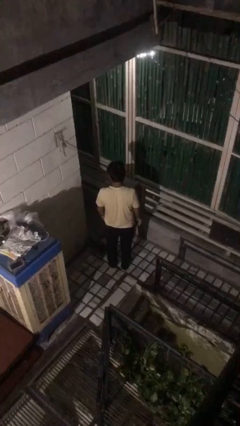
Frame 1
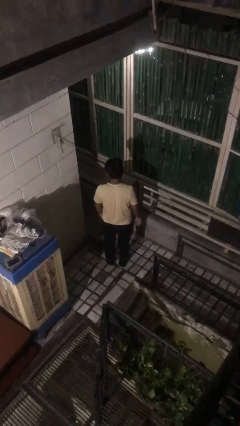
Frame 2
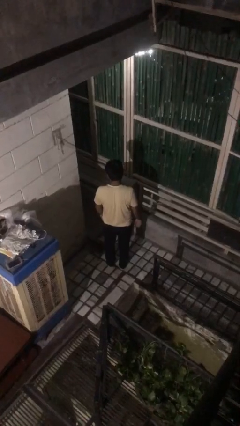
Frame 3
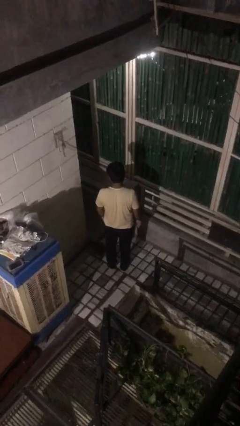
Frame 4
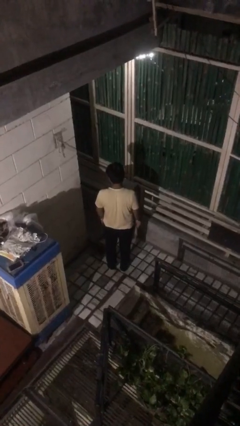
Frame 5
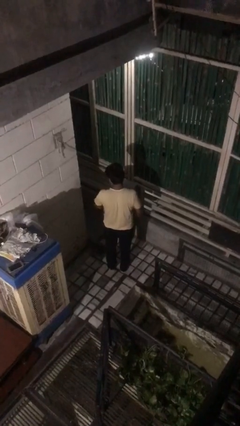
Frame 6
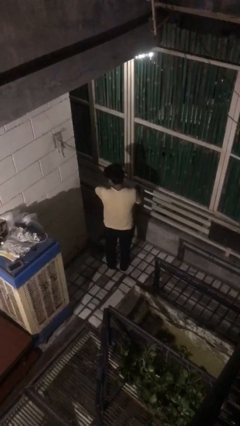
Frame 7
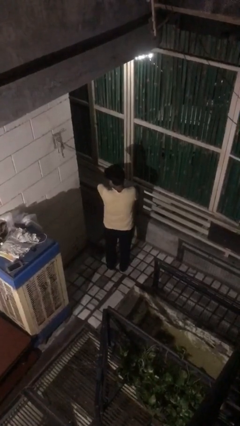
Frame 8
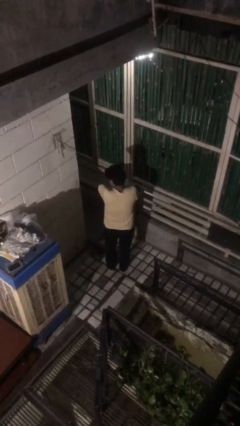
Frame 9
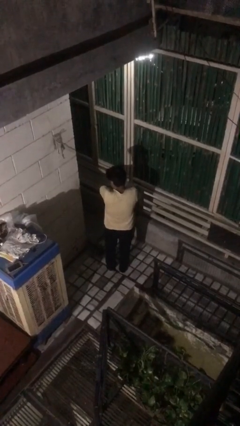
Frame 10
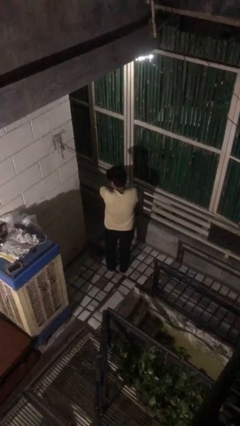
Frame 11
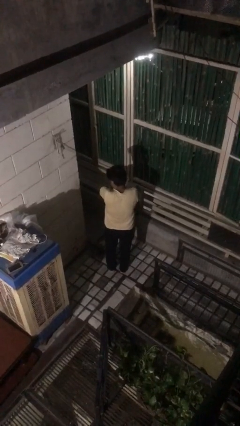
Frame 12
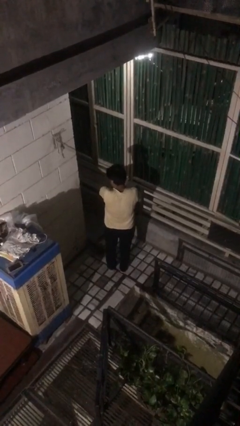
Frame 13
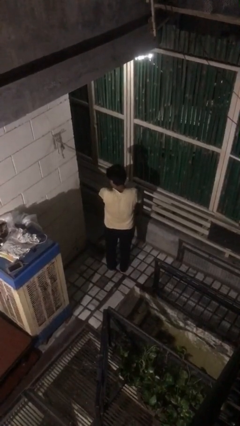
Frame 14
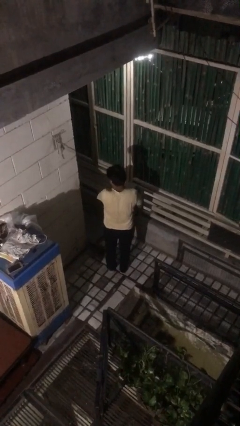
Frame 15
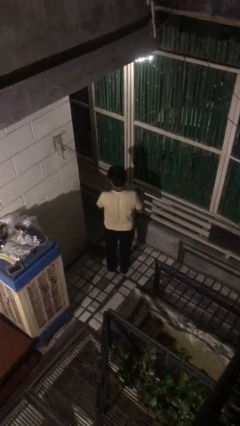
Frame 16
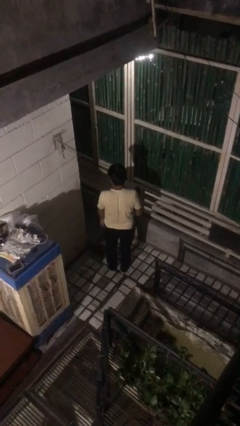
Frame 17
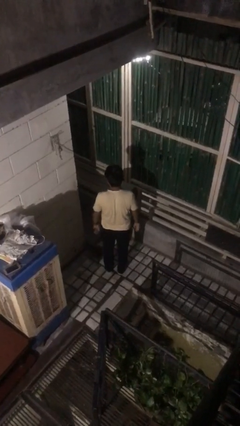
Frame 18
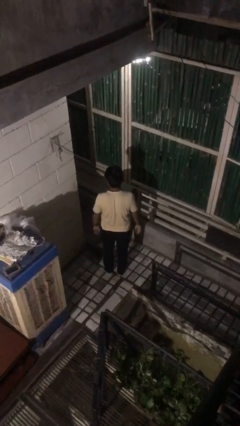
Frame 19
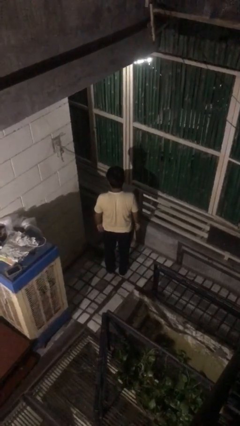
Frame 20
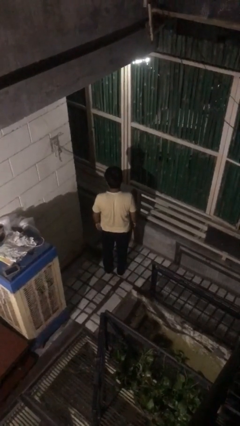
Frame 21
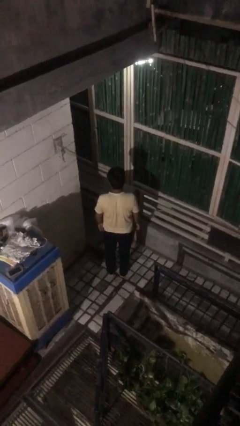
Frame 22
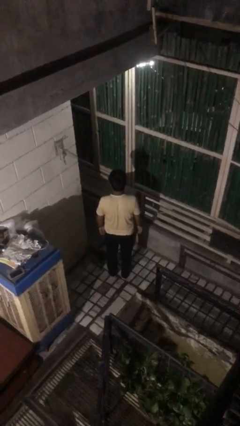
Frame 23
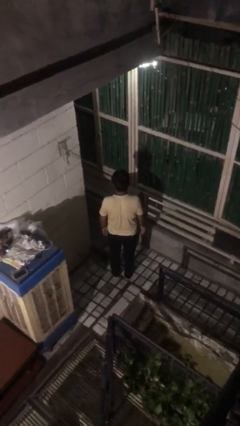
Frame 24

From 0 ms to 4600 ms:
person swats bug

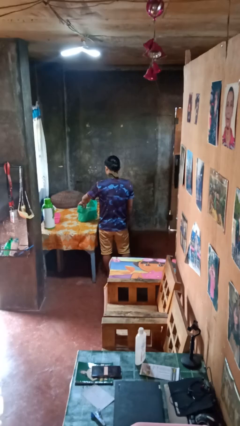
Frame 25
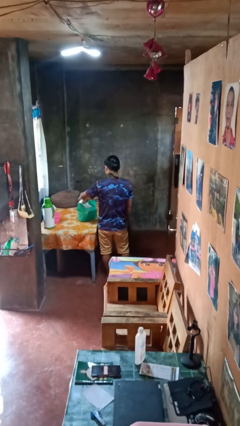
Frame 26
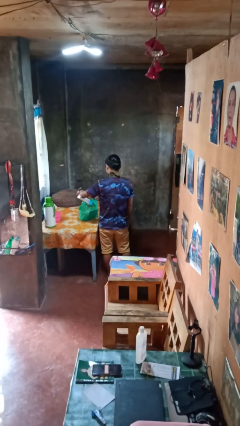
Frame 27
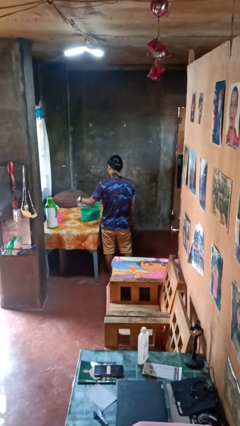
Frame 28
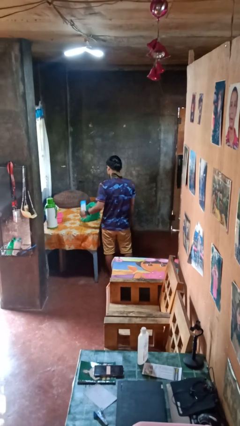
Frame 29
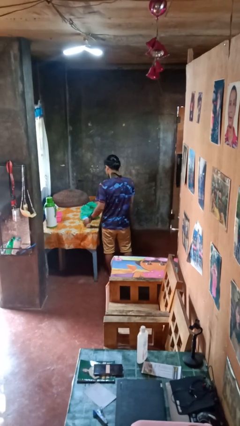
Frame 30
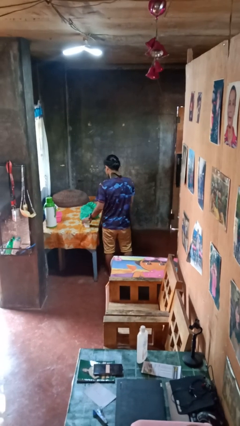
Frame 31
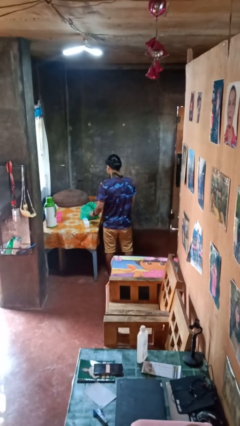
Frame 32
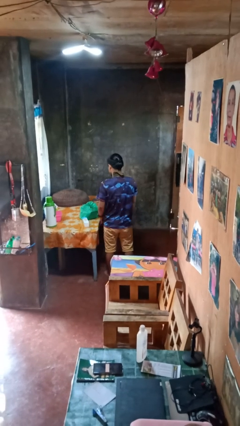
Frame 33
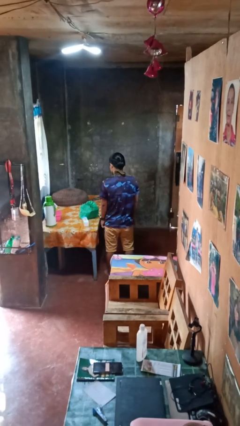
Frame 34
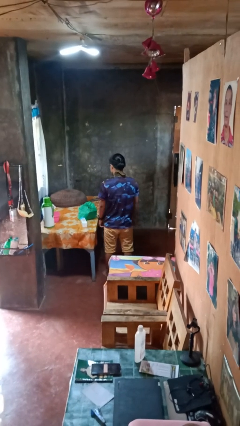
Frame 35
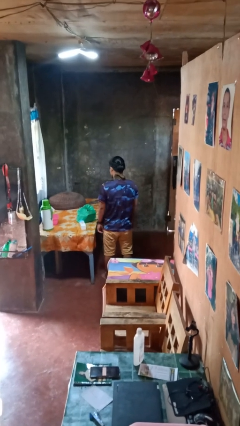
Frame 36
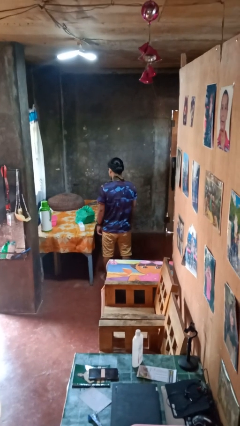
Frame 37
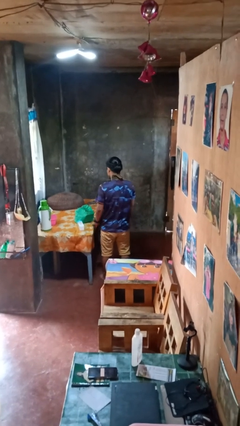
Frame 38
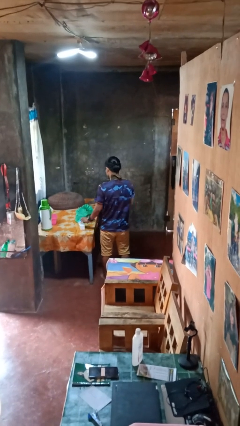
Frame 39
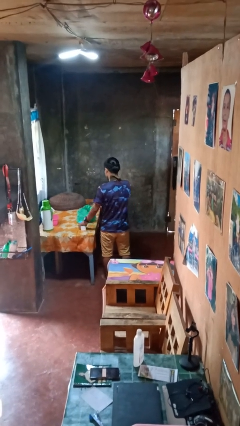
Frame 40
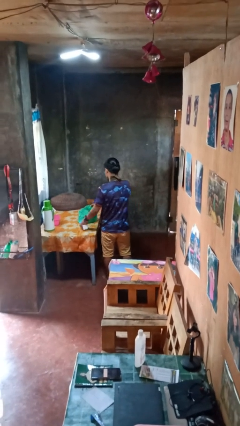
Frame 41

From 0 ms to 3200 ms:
person takes object from bag

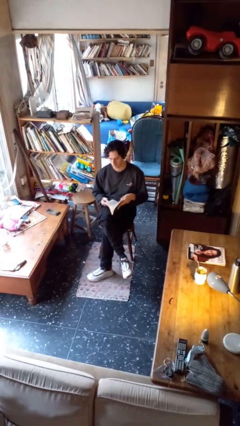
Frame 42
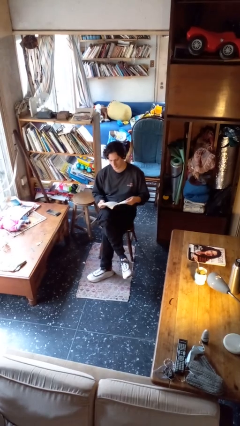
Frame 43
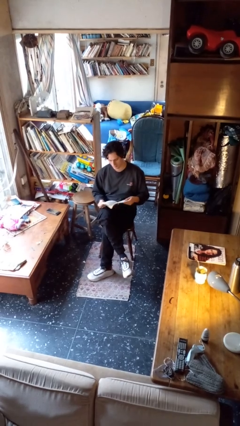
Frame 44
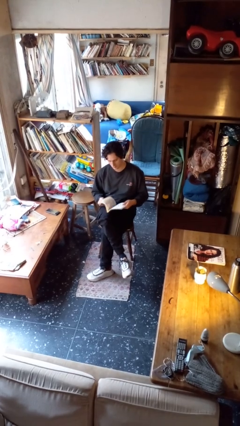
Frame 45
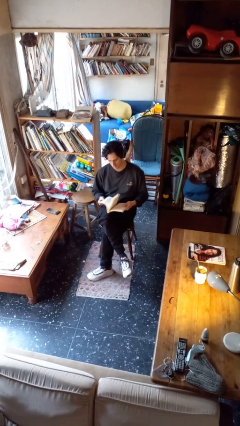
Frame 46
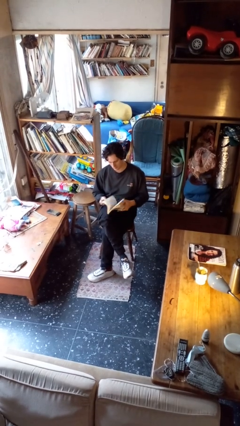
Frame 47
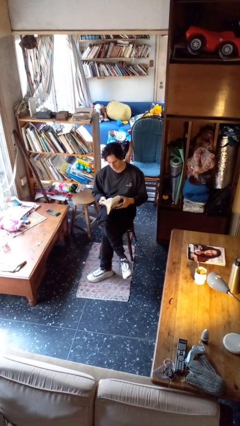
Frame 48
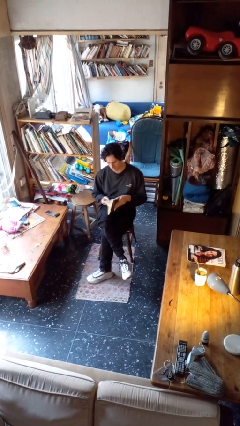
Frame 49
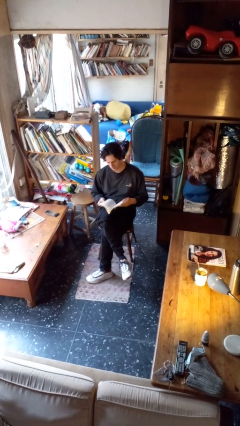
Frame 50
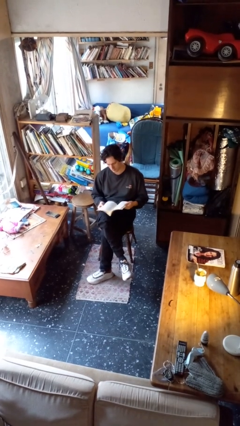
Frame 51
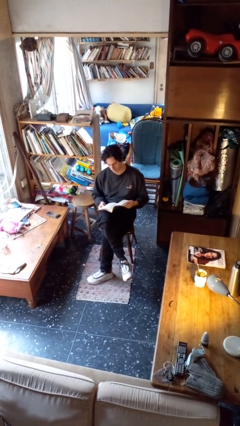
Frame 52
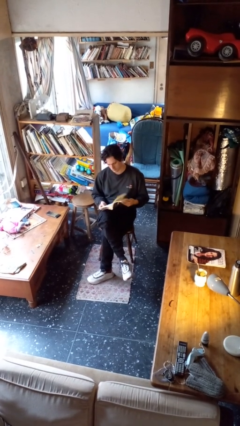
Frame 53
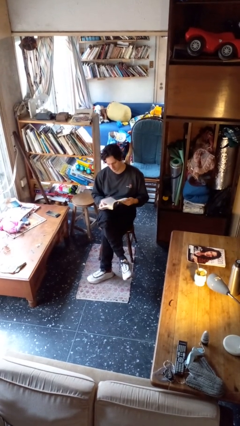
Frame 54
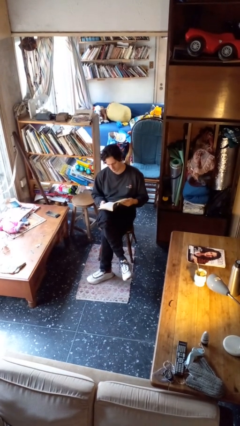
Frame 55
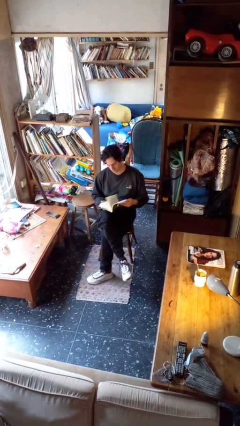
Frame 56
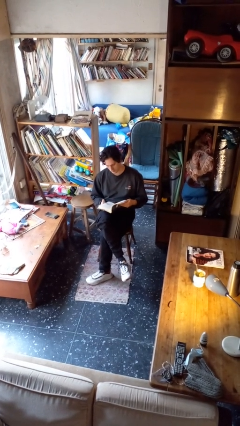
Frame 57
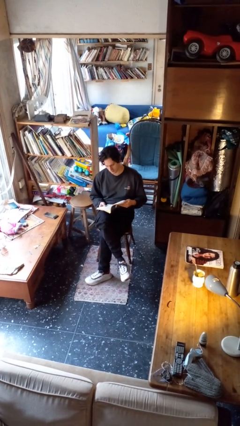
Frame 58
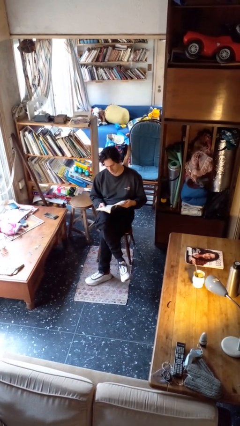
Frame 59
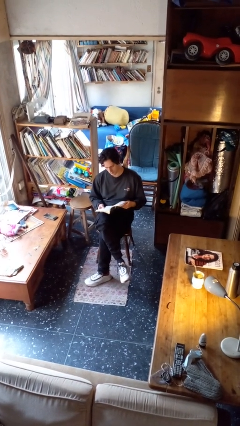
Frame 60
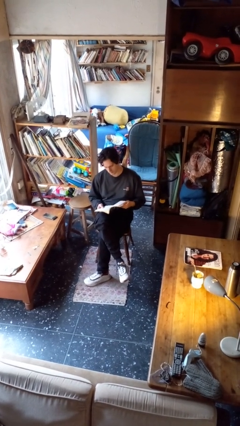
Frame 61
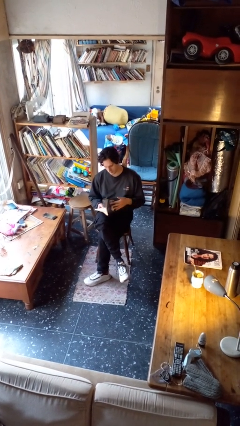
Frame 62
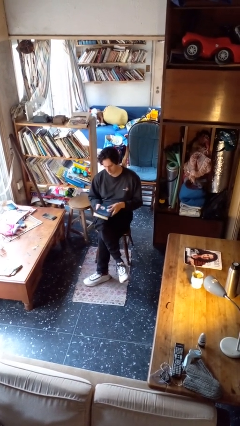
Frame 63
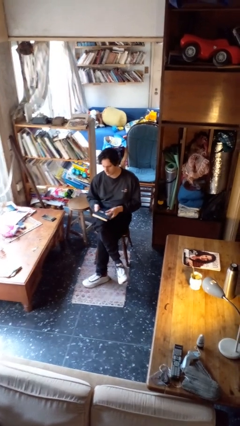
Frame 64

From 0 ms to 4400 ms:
person reads book

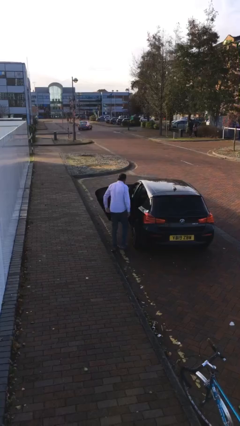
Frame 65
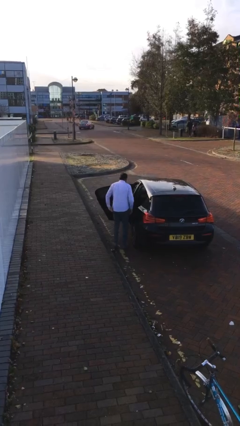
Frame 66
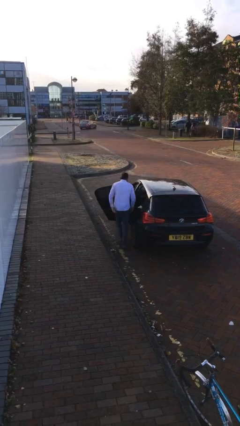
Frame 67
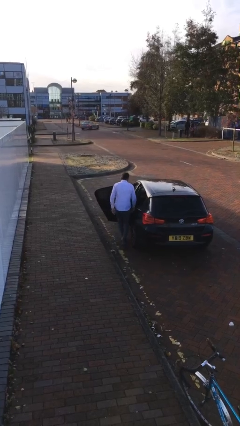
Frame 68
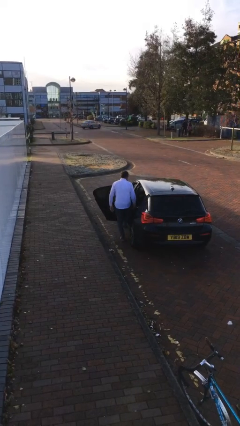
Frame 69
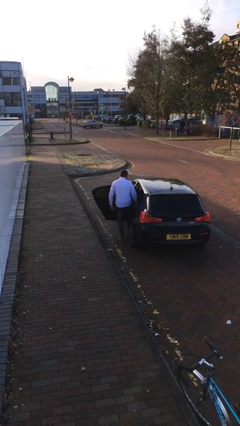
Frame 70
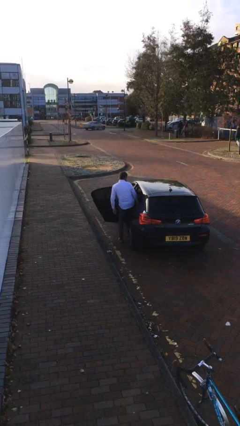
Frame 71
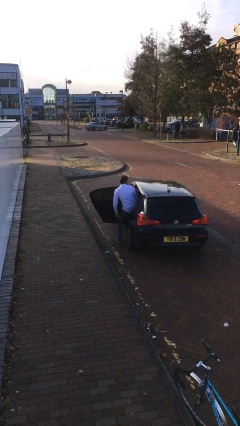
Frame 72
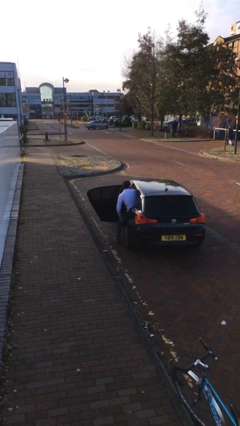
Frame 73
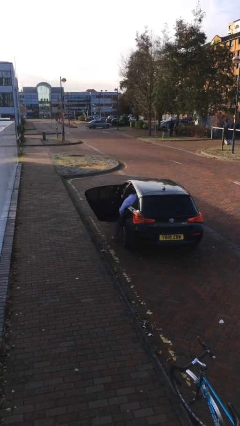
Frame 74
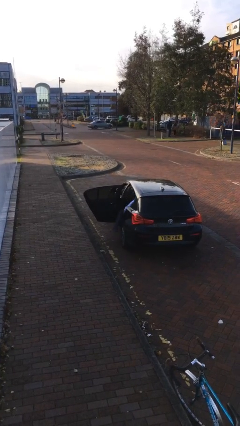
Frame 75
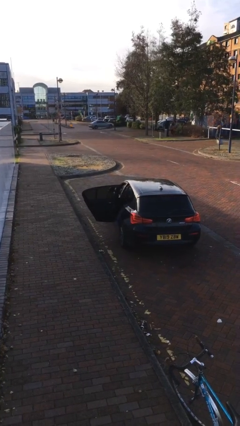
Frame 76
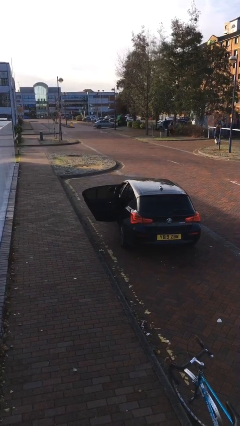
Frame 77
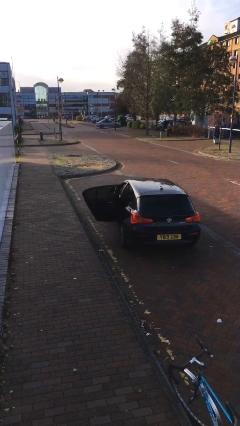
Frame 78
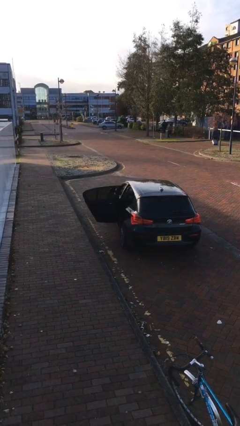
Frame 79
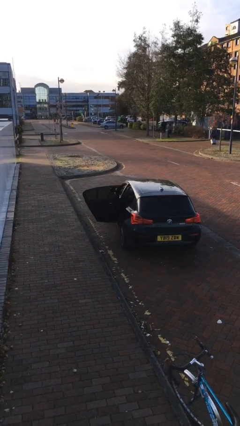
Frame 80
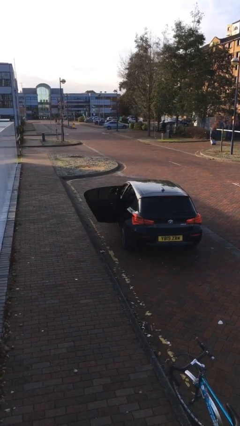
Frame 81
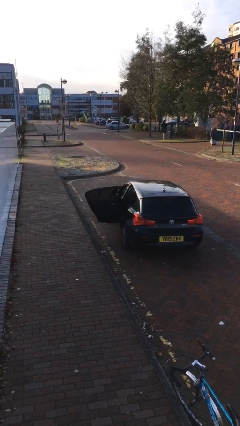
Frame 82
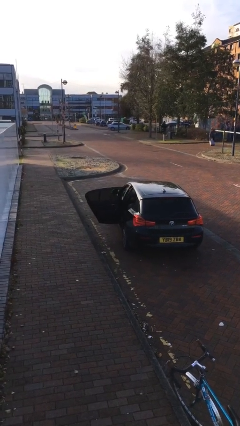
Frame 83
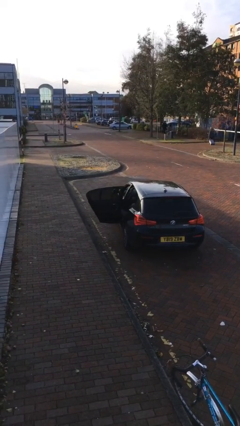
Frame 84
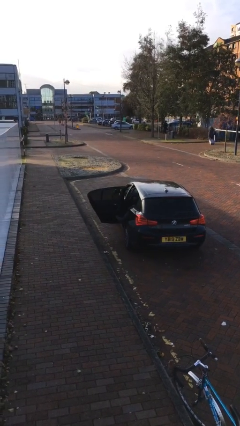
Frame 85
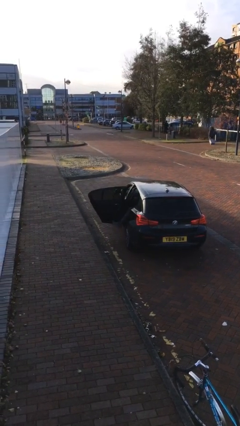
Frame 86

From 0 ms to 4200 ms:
person enters car

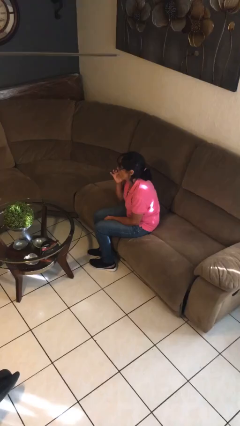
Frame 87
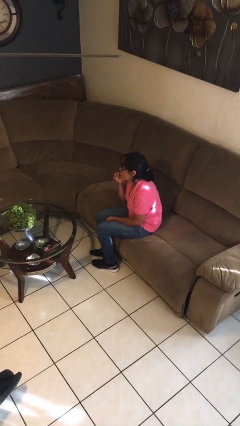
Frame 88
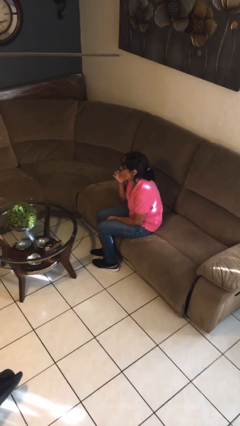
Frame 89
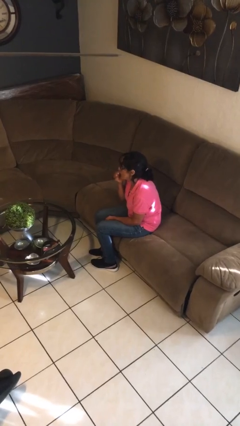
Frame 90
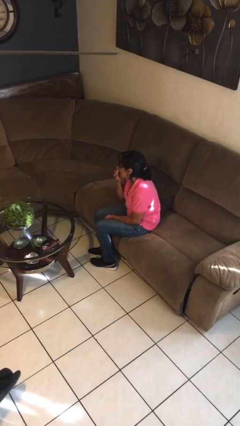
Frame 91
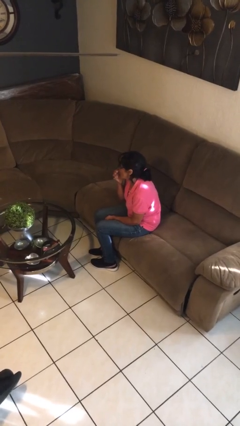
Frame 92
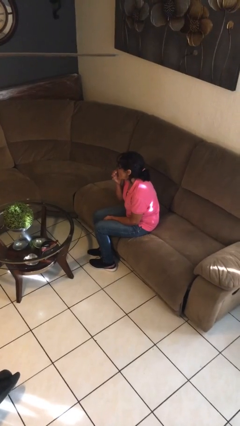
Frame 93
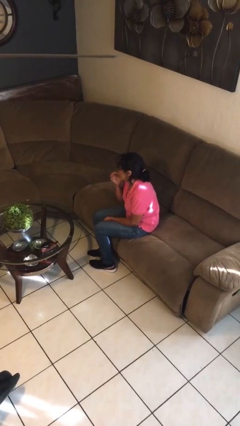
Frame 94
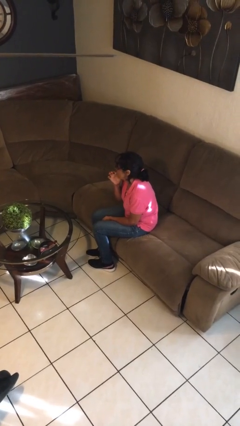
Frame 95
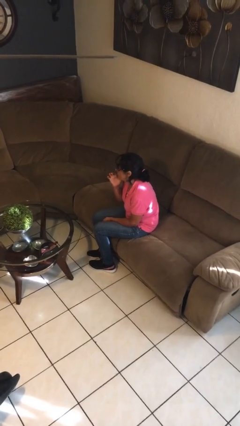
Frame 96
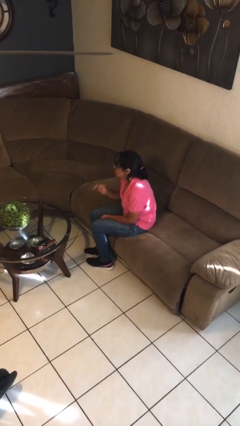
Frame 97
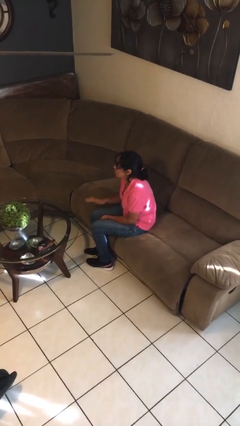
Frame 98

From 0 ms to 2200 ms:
person licks fingers
